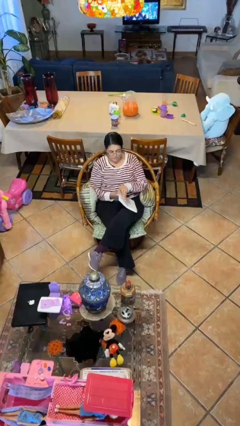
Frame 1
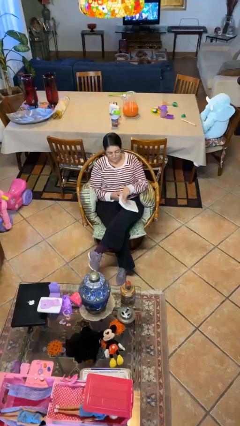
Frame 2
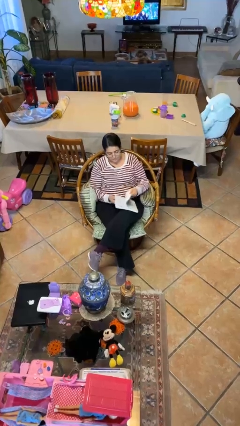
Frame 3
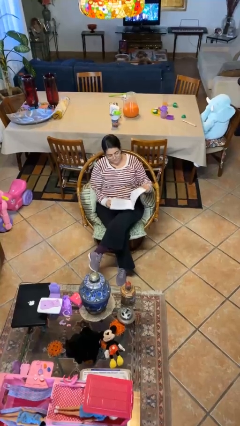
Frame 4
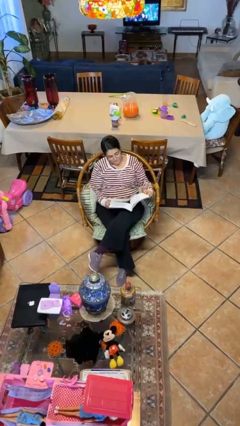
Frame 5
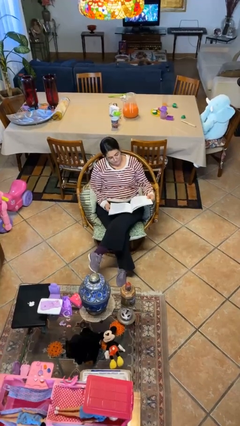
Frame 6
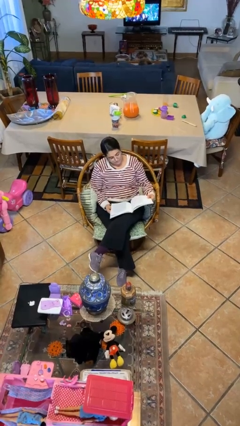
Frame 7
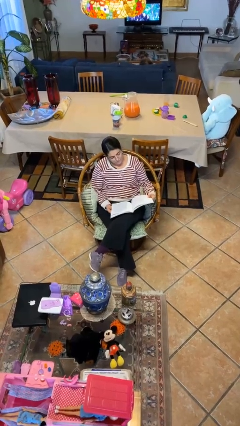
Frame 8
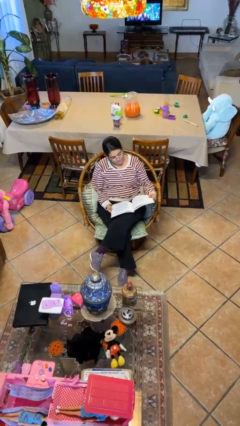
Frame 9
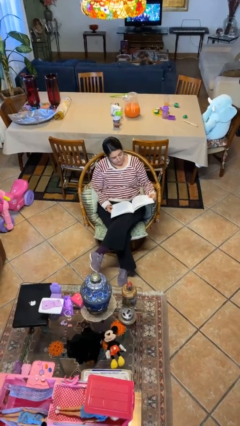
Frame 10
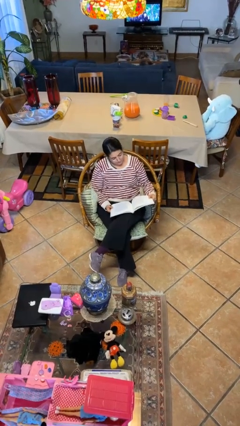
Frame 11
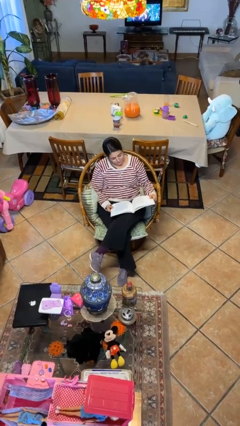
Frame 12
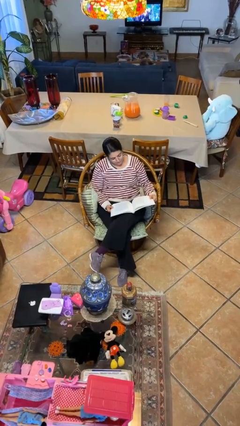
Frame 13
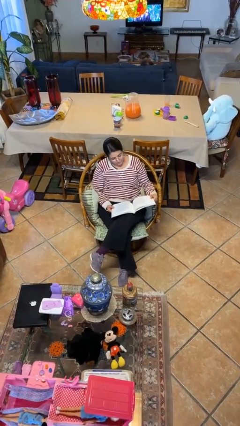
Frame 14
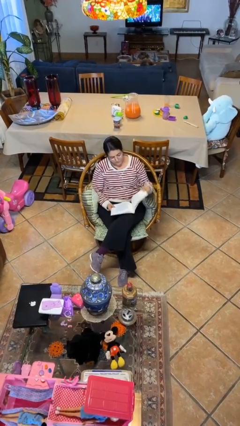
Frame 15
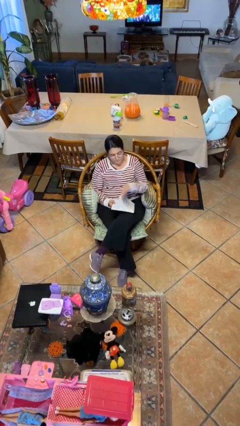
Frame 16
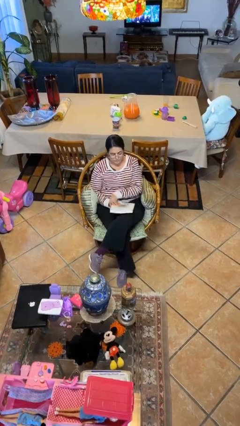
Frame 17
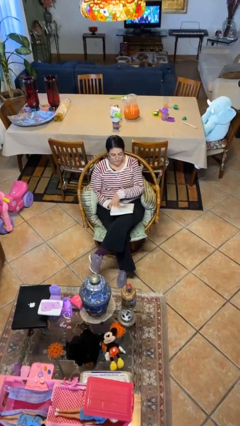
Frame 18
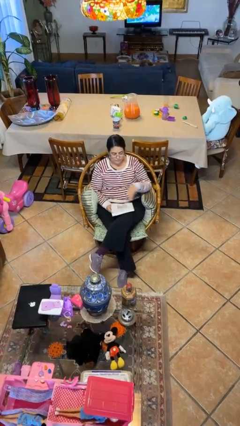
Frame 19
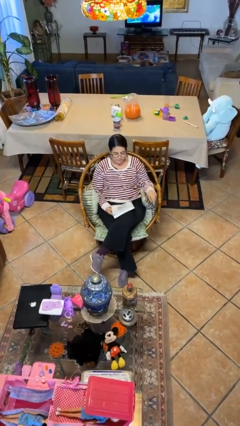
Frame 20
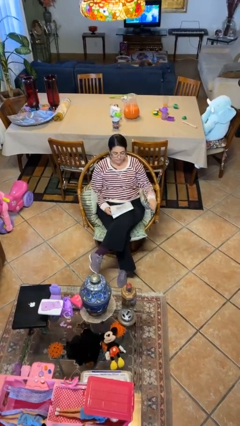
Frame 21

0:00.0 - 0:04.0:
person reads document

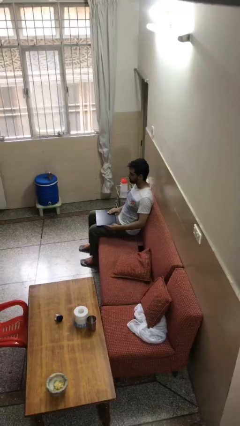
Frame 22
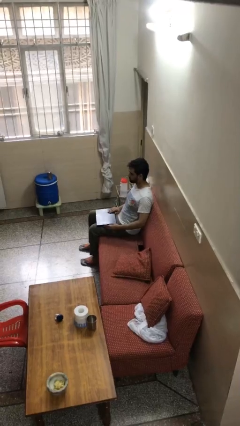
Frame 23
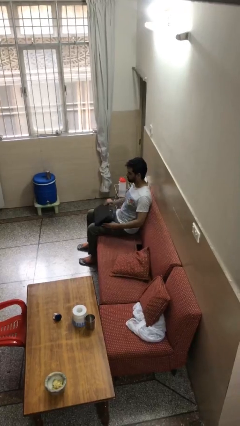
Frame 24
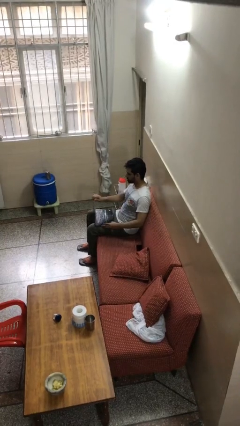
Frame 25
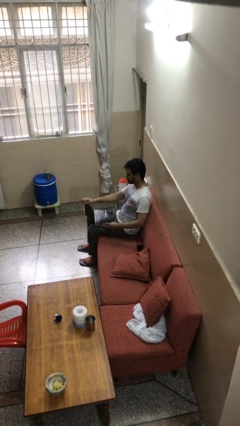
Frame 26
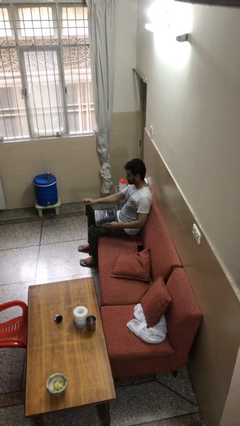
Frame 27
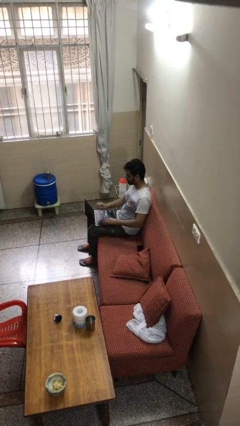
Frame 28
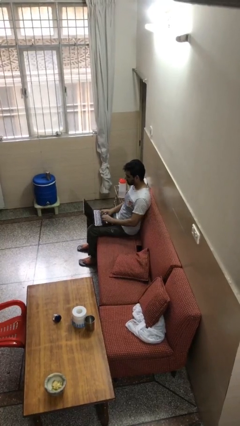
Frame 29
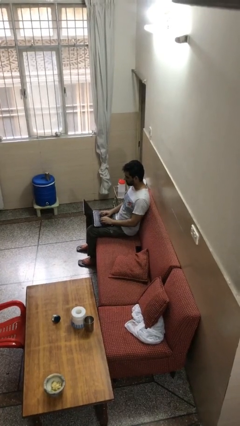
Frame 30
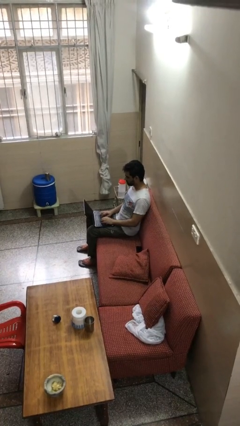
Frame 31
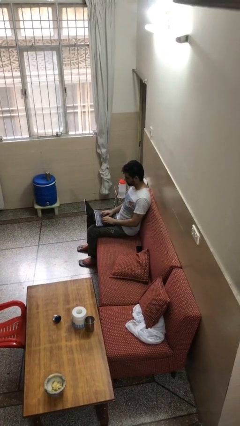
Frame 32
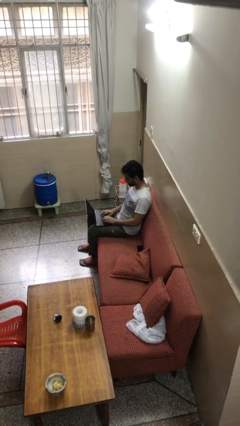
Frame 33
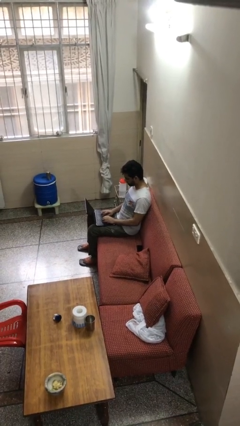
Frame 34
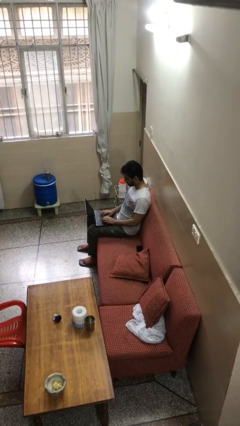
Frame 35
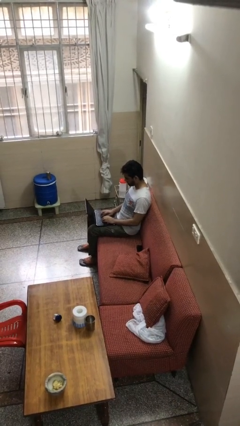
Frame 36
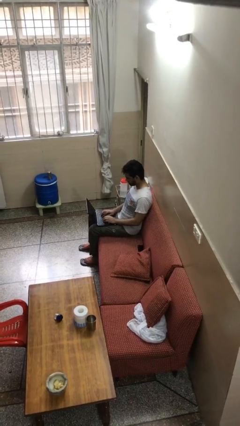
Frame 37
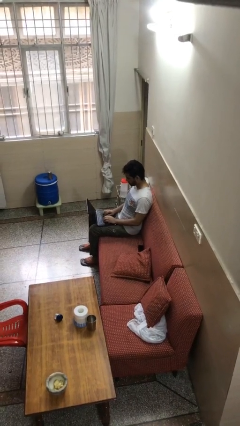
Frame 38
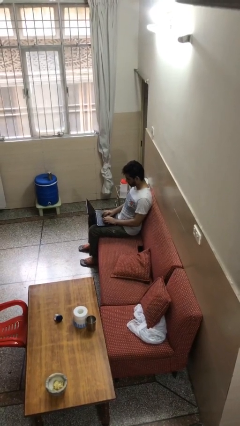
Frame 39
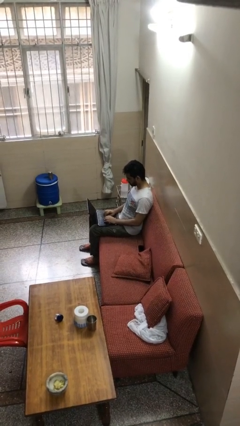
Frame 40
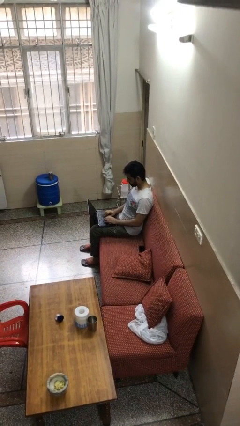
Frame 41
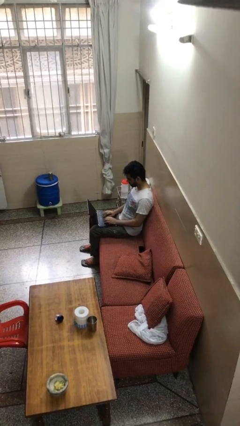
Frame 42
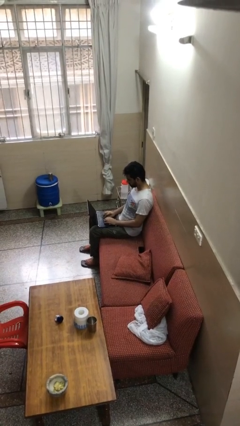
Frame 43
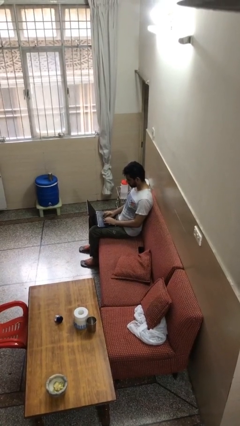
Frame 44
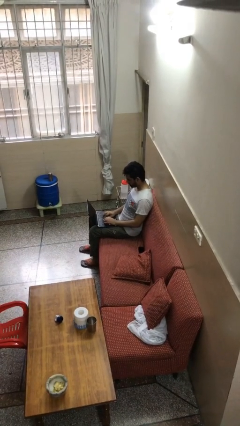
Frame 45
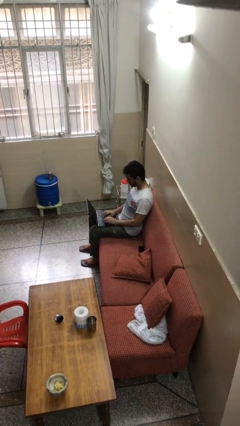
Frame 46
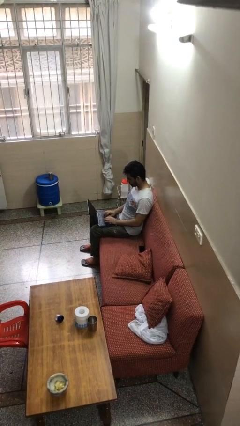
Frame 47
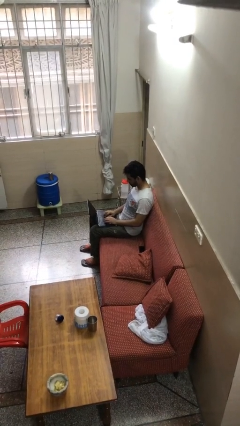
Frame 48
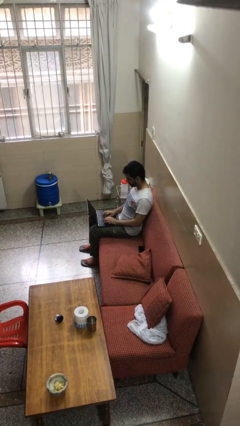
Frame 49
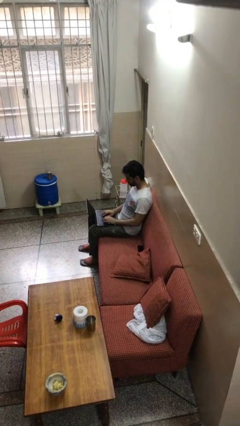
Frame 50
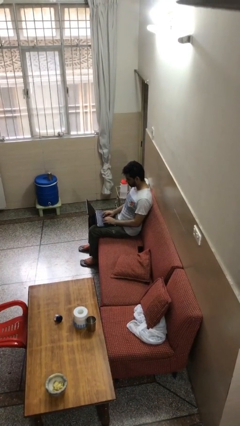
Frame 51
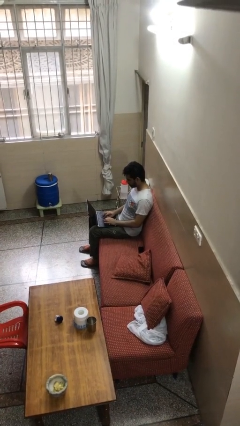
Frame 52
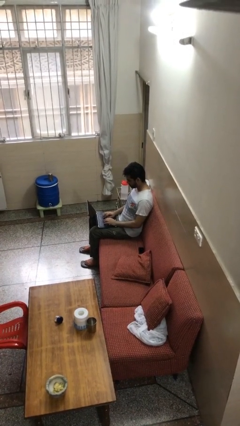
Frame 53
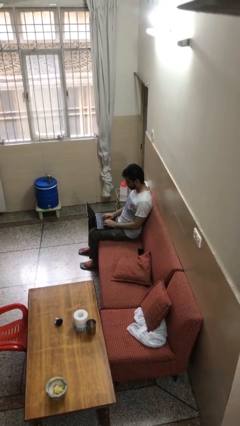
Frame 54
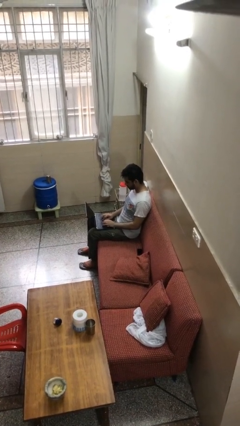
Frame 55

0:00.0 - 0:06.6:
person interacts with laptop

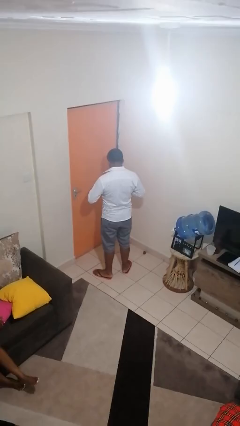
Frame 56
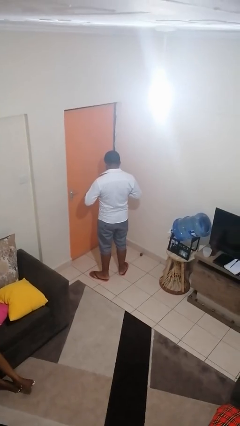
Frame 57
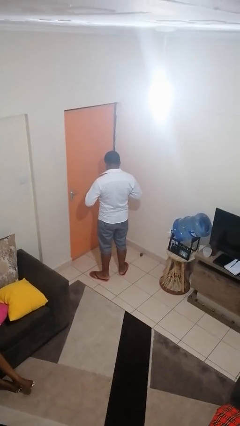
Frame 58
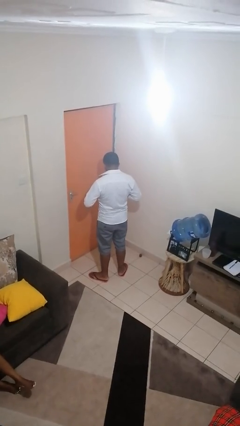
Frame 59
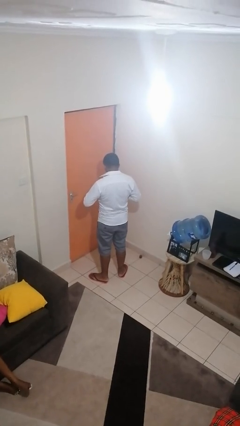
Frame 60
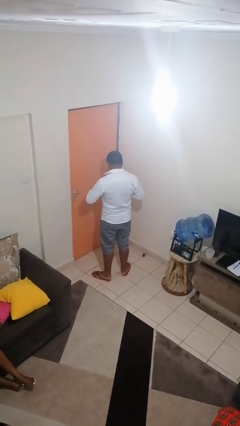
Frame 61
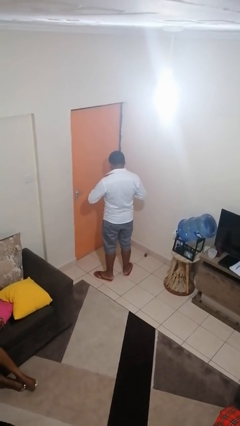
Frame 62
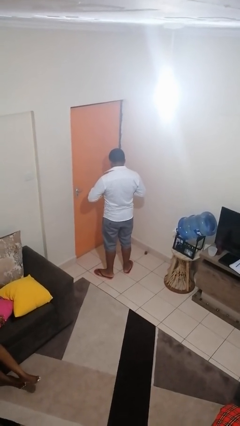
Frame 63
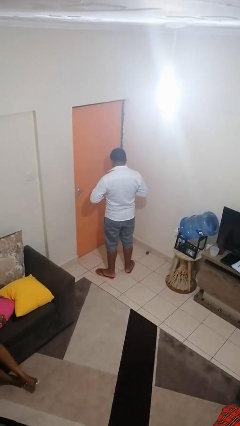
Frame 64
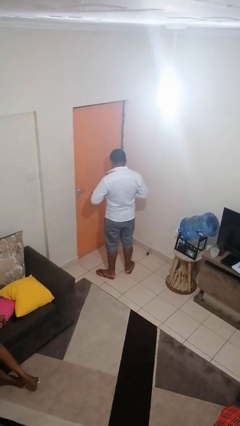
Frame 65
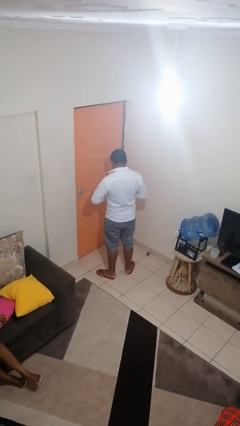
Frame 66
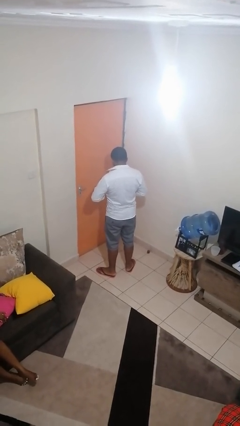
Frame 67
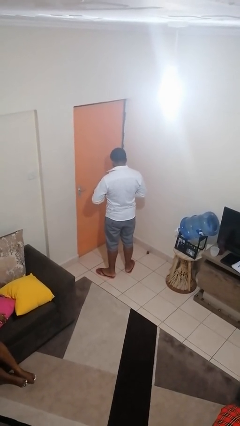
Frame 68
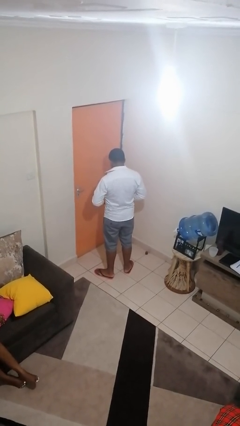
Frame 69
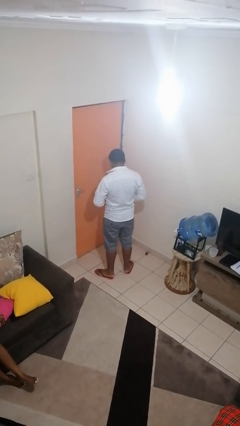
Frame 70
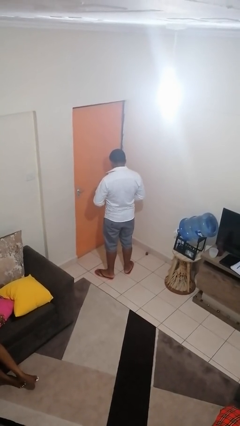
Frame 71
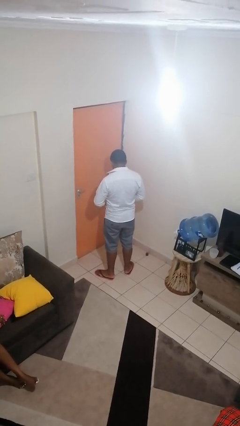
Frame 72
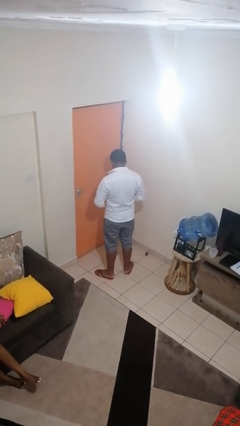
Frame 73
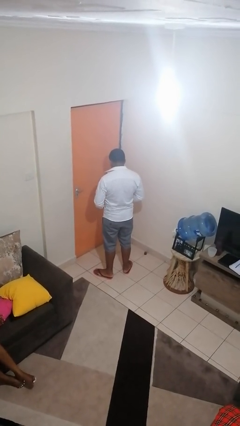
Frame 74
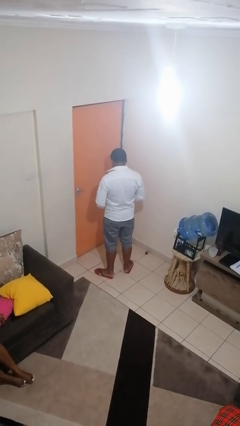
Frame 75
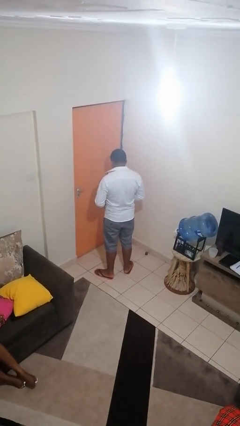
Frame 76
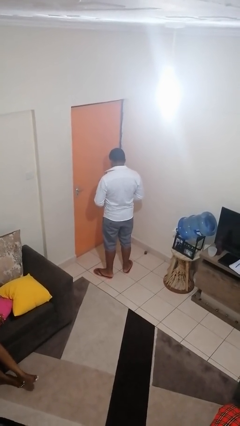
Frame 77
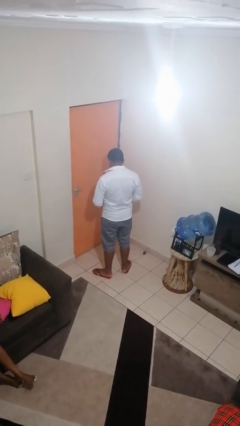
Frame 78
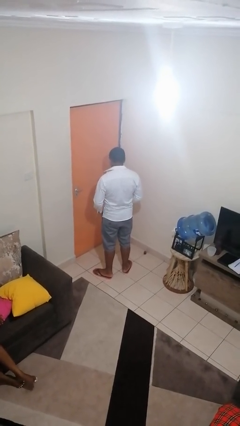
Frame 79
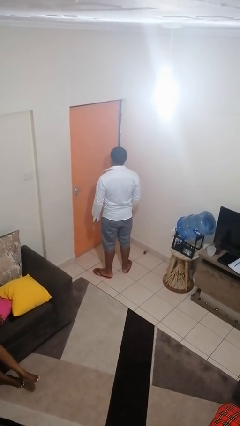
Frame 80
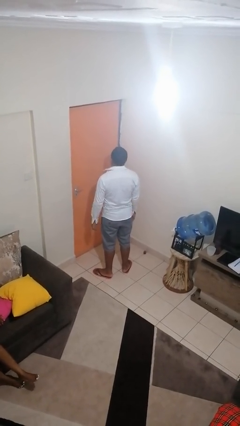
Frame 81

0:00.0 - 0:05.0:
person unbuttons shirt

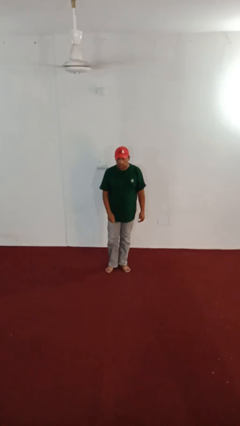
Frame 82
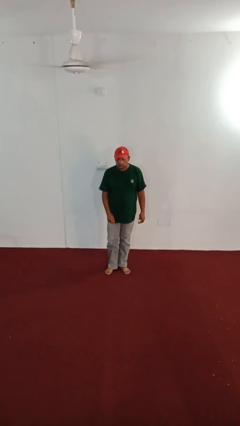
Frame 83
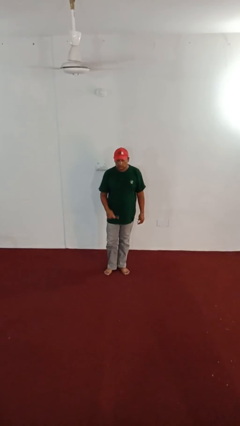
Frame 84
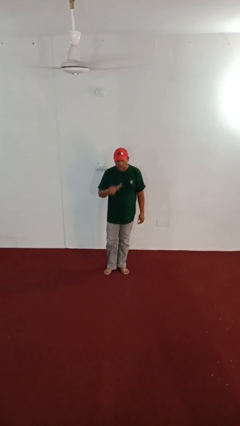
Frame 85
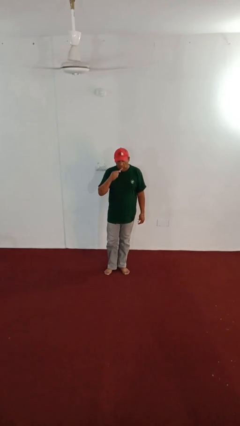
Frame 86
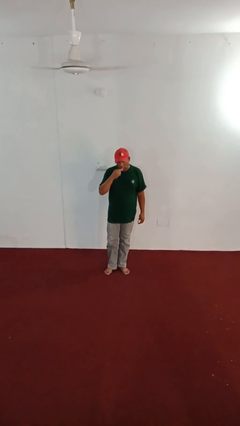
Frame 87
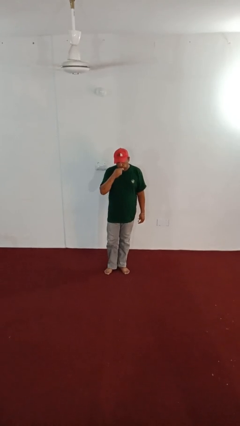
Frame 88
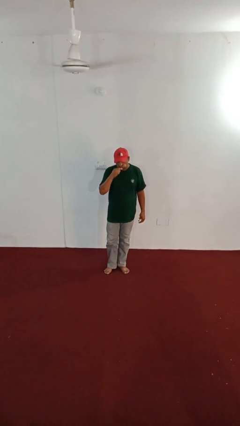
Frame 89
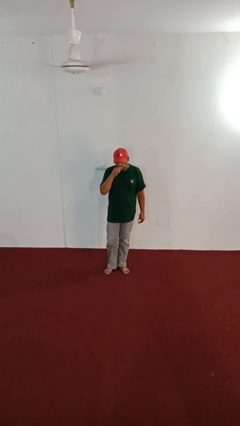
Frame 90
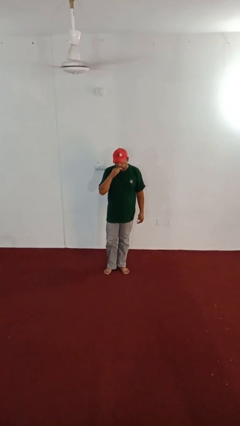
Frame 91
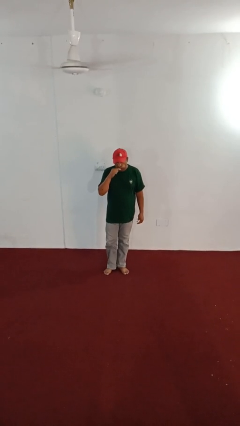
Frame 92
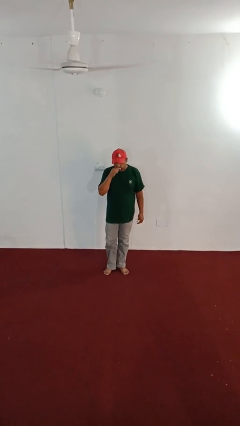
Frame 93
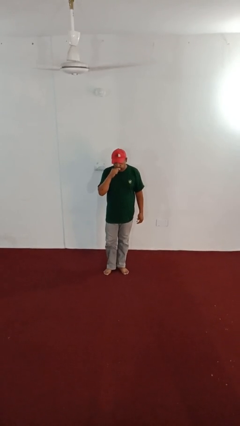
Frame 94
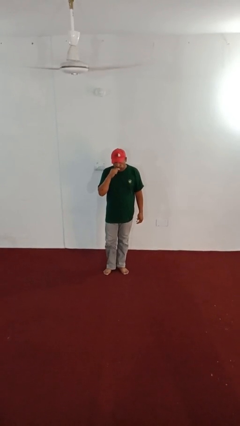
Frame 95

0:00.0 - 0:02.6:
person brushes teeth
